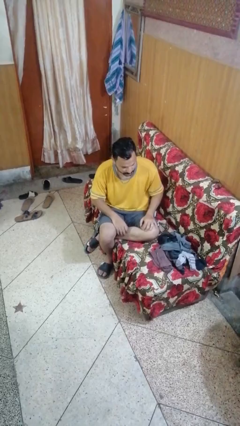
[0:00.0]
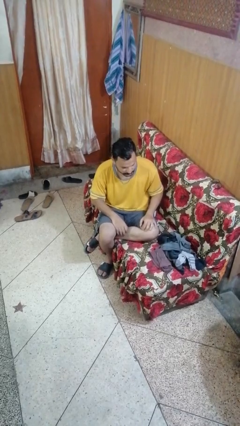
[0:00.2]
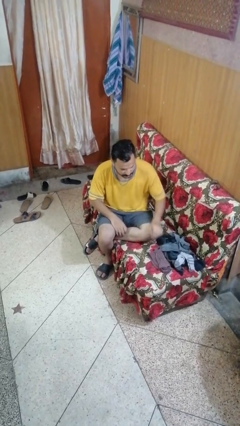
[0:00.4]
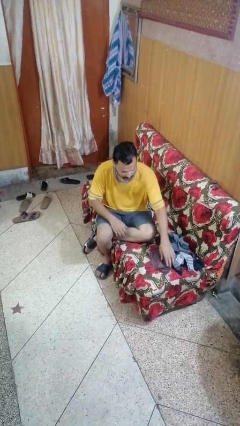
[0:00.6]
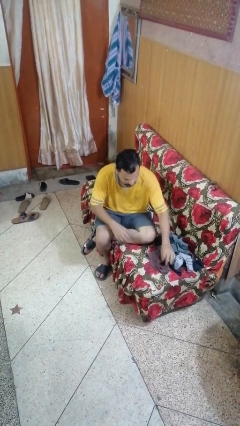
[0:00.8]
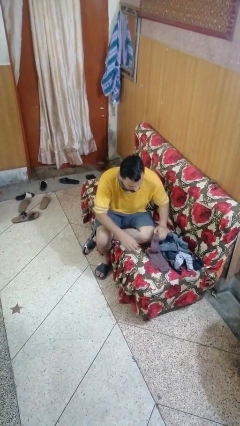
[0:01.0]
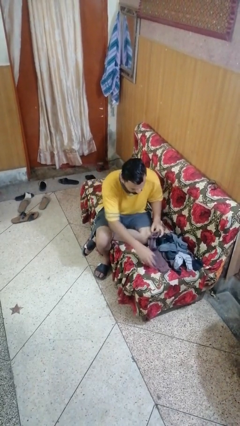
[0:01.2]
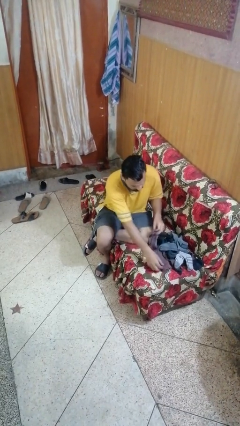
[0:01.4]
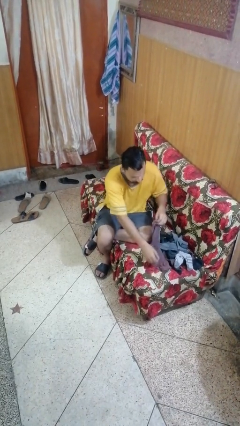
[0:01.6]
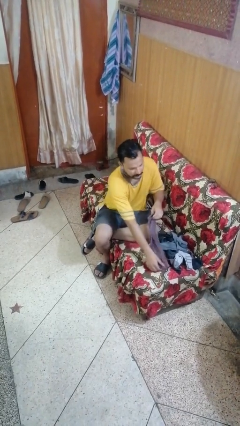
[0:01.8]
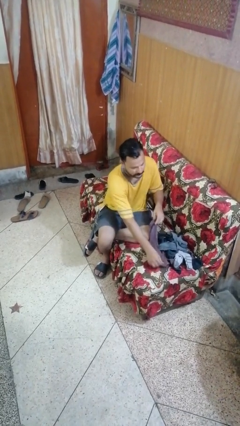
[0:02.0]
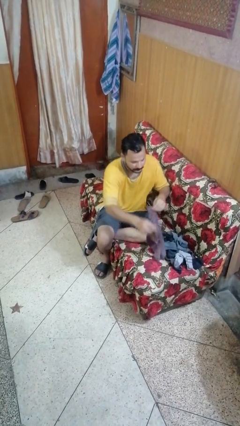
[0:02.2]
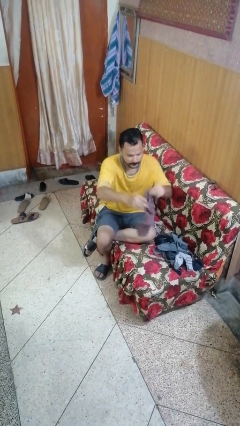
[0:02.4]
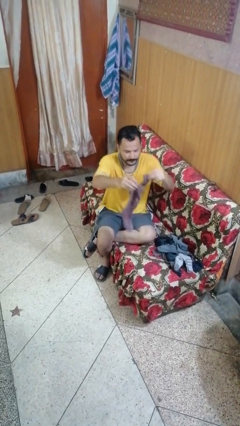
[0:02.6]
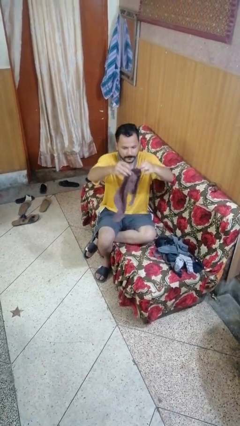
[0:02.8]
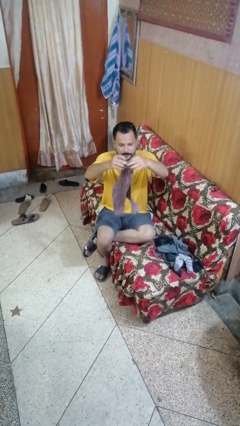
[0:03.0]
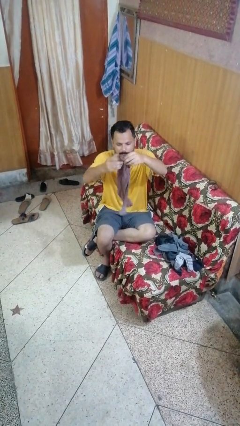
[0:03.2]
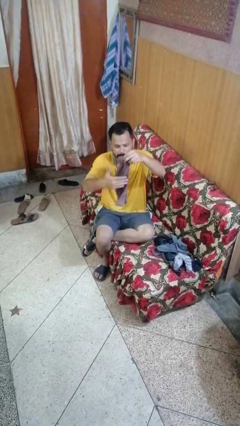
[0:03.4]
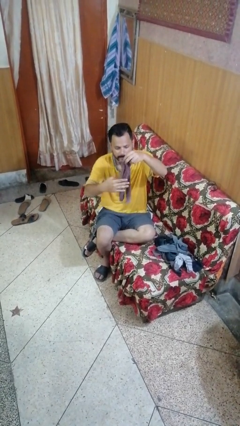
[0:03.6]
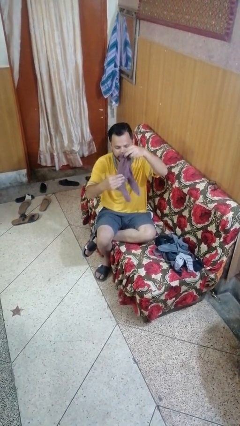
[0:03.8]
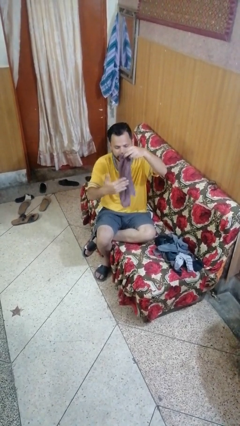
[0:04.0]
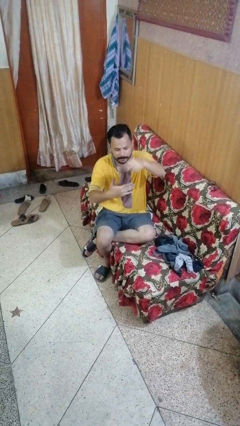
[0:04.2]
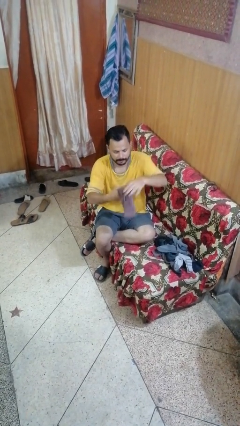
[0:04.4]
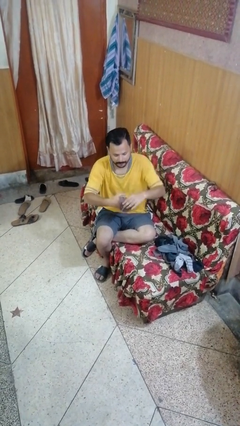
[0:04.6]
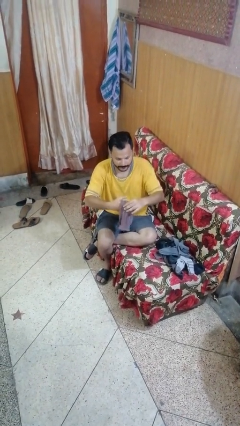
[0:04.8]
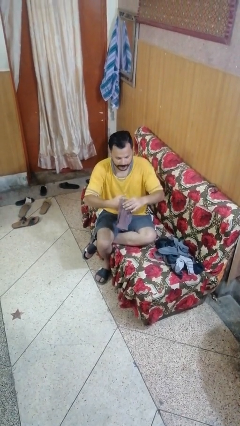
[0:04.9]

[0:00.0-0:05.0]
person folds socks

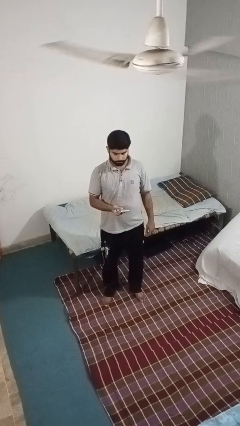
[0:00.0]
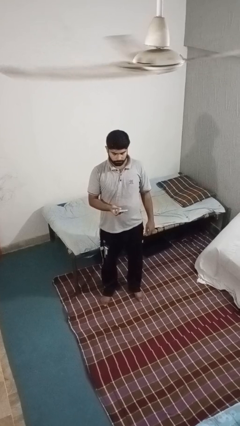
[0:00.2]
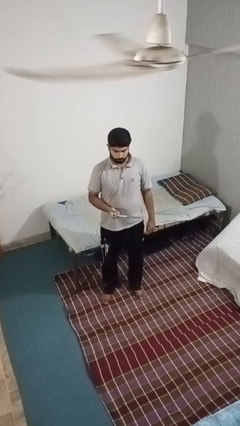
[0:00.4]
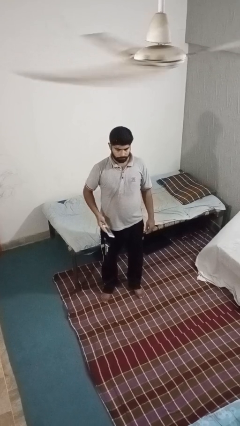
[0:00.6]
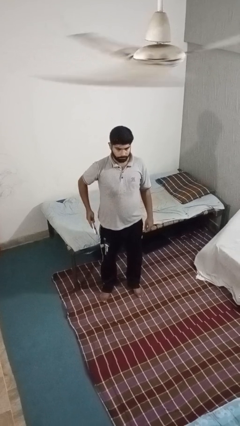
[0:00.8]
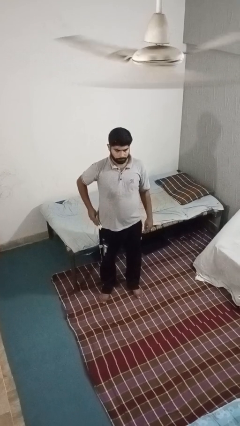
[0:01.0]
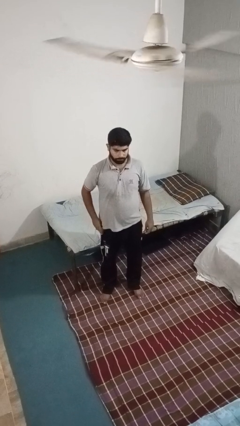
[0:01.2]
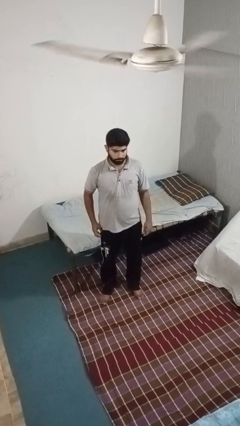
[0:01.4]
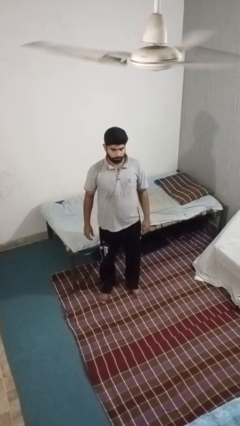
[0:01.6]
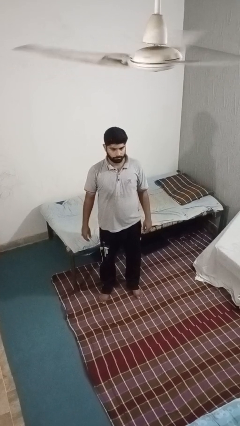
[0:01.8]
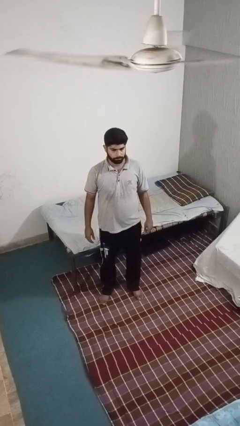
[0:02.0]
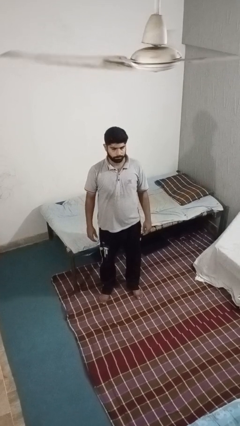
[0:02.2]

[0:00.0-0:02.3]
person puts phone into pocket

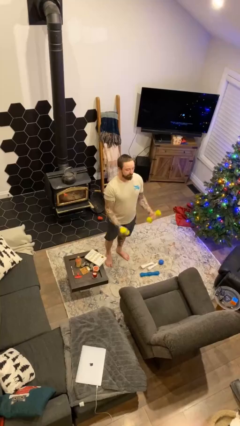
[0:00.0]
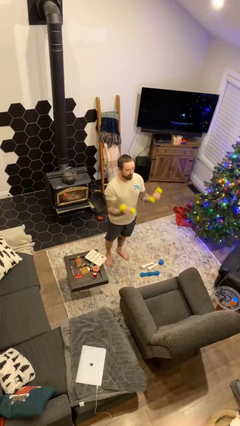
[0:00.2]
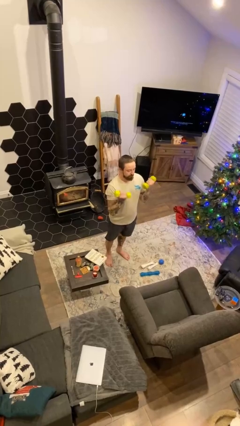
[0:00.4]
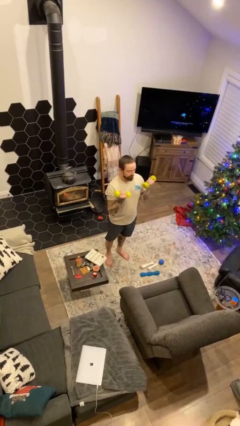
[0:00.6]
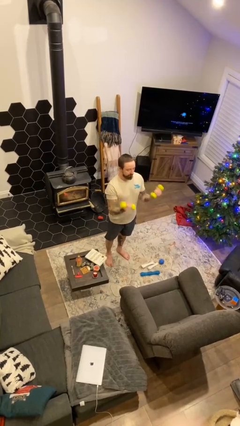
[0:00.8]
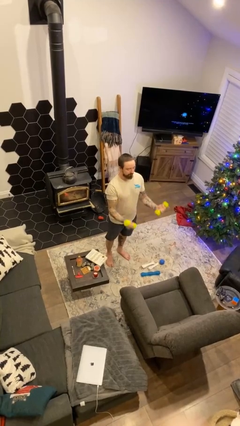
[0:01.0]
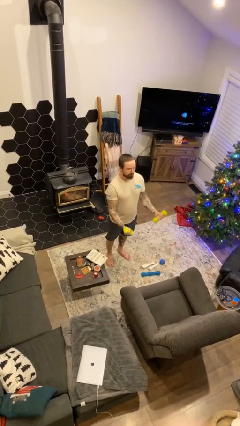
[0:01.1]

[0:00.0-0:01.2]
person lifts dumbbells

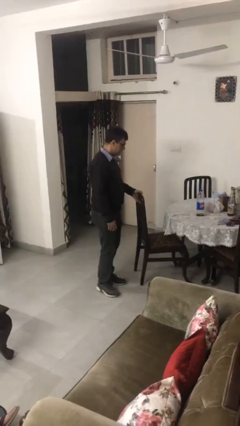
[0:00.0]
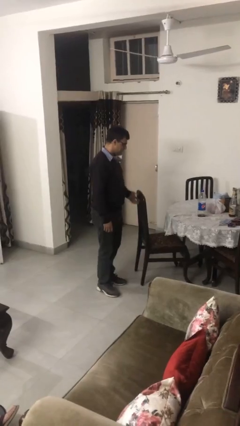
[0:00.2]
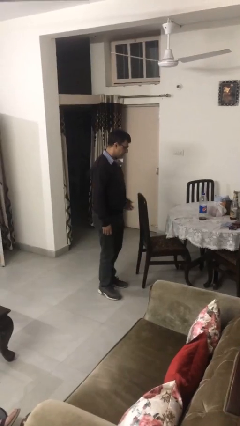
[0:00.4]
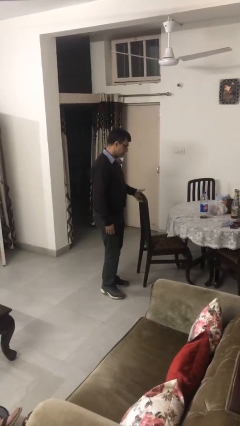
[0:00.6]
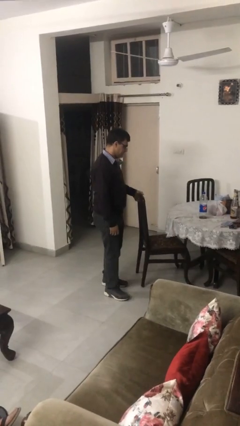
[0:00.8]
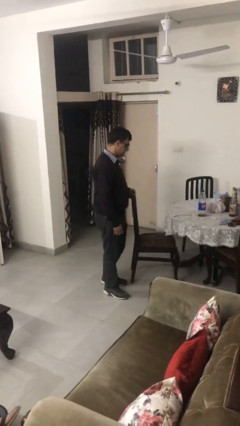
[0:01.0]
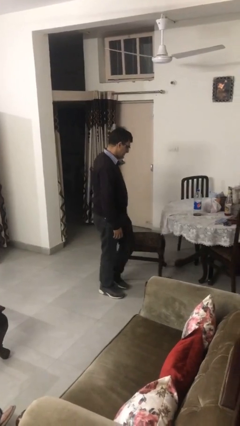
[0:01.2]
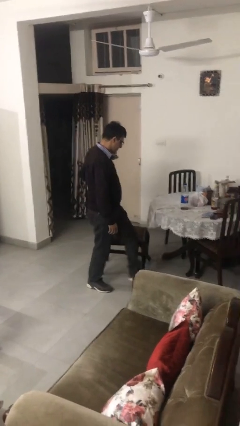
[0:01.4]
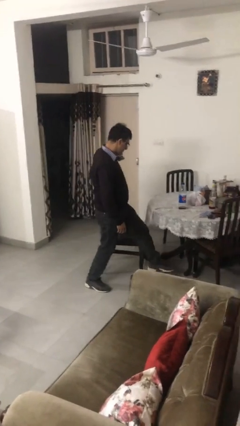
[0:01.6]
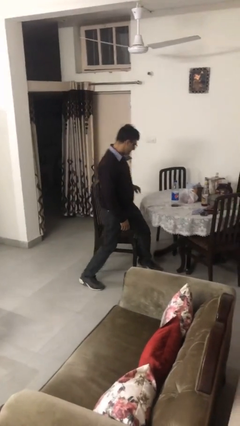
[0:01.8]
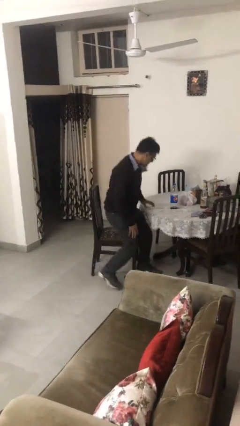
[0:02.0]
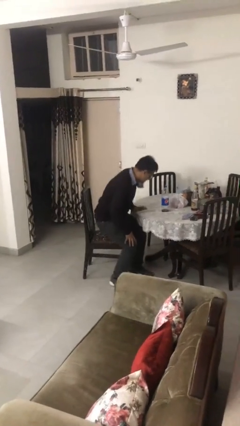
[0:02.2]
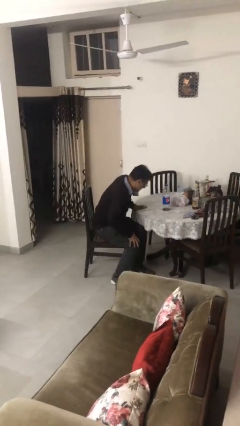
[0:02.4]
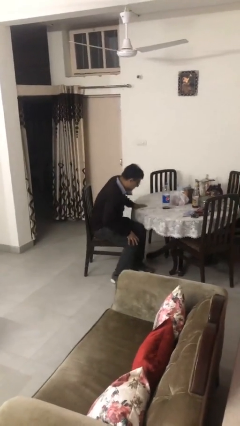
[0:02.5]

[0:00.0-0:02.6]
person sits down

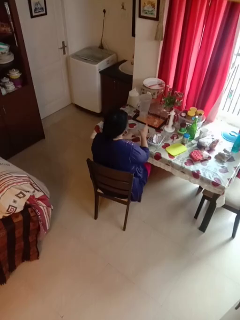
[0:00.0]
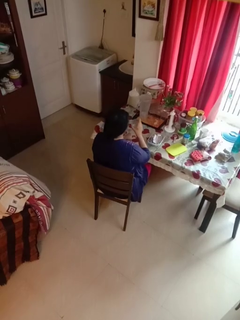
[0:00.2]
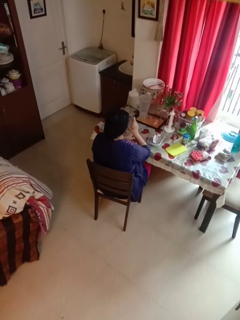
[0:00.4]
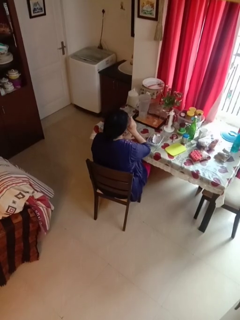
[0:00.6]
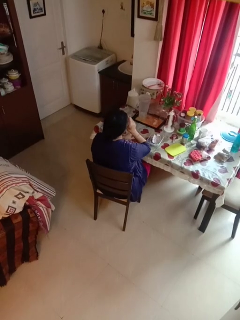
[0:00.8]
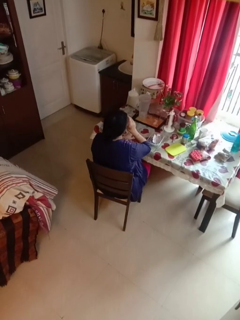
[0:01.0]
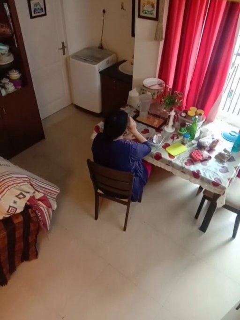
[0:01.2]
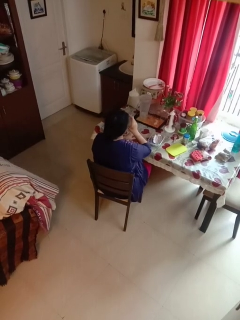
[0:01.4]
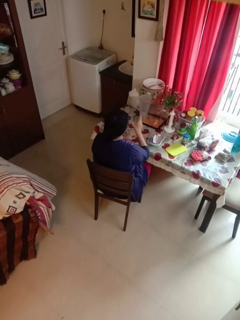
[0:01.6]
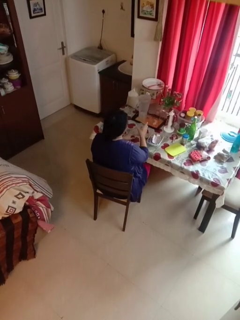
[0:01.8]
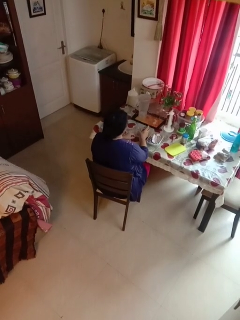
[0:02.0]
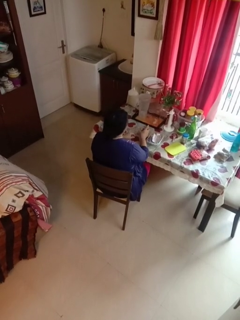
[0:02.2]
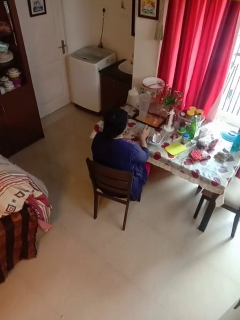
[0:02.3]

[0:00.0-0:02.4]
person drinks from cup

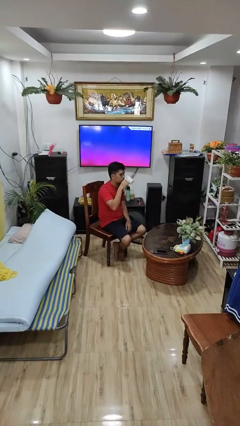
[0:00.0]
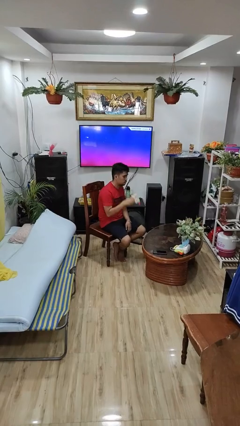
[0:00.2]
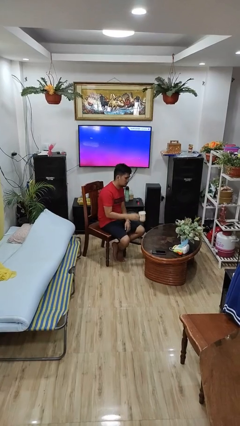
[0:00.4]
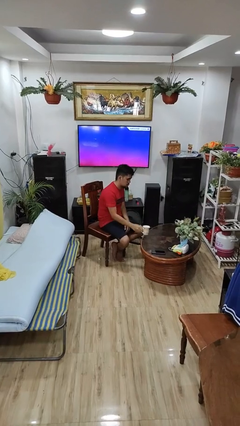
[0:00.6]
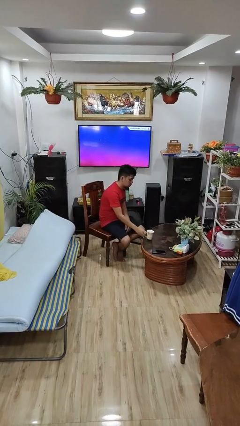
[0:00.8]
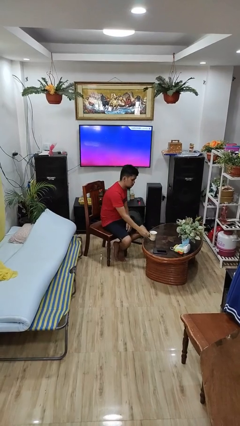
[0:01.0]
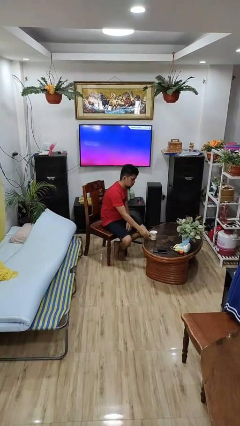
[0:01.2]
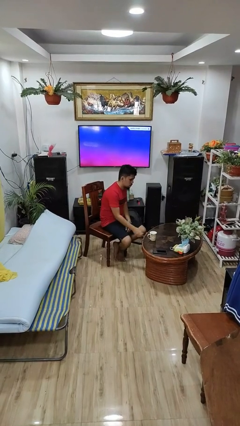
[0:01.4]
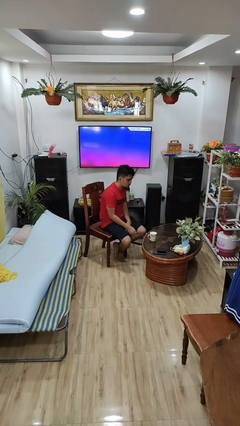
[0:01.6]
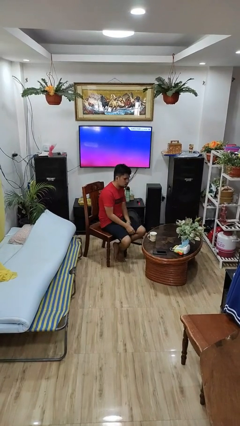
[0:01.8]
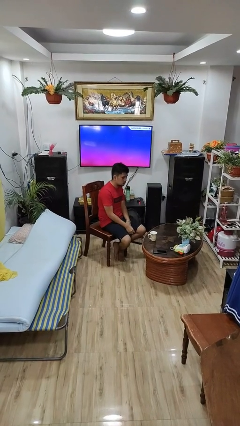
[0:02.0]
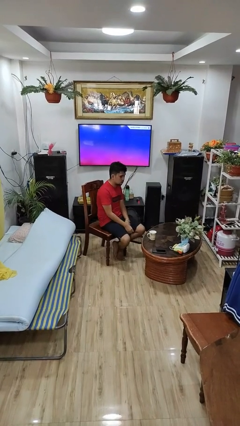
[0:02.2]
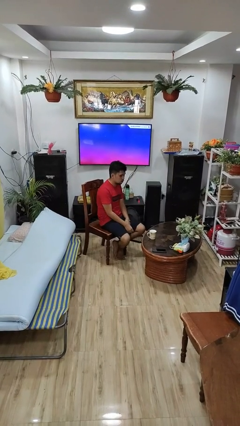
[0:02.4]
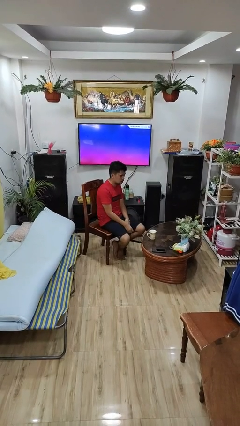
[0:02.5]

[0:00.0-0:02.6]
person puts down object on table

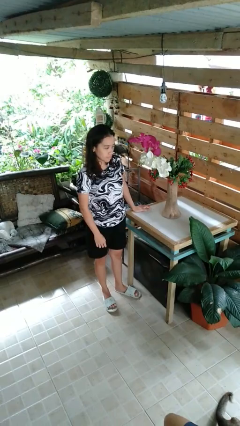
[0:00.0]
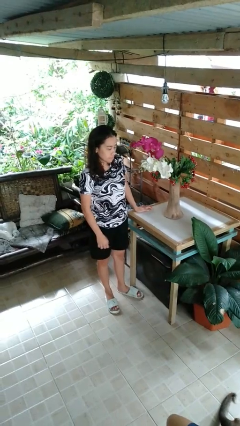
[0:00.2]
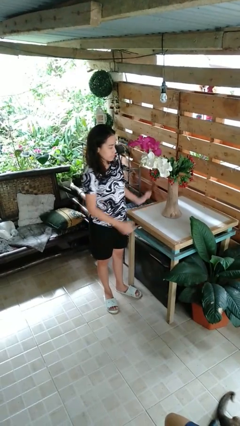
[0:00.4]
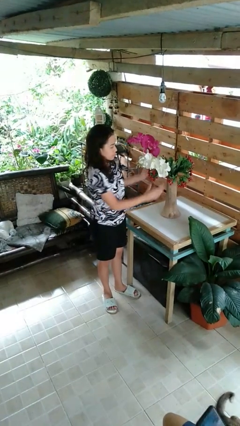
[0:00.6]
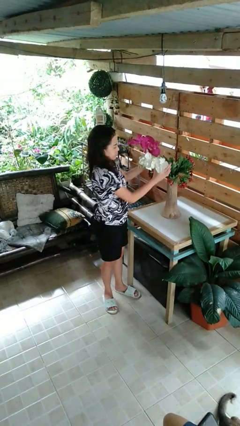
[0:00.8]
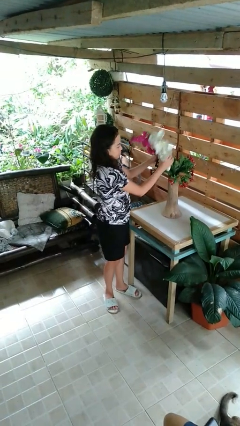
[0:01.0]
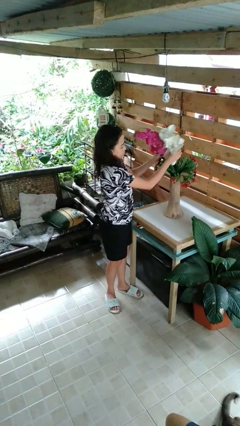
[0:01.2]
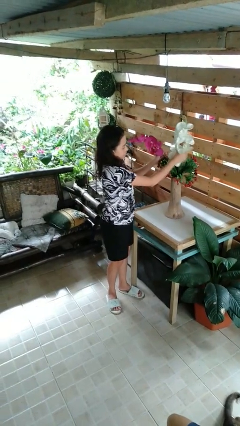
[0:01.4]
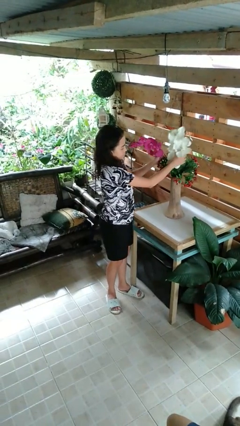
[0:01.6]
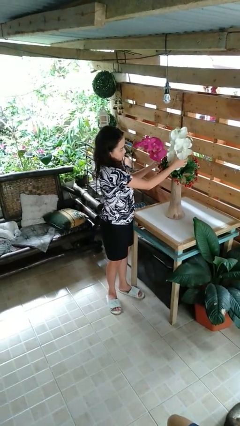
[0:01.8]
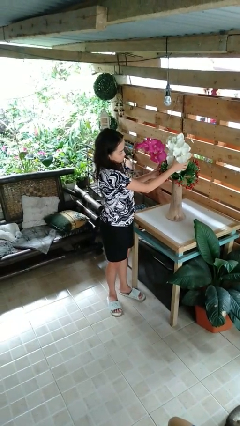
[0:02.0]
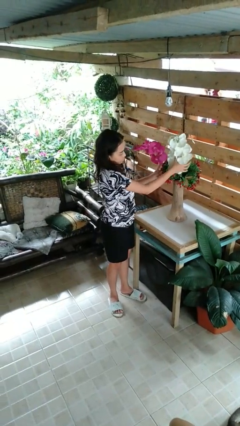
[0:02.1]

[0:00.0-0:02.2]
person arranges flowers in vase
